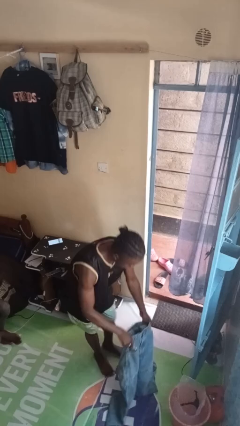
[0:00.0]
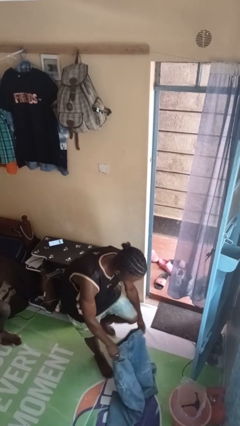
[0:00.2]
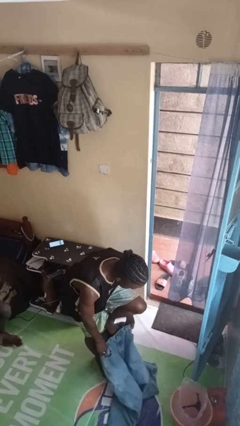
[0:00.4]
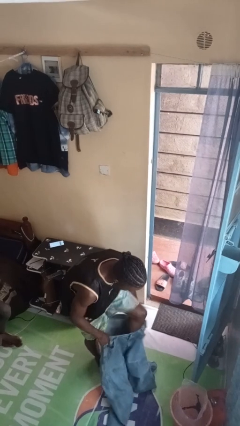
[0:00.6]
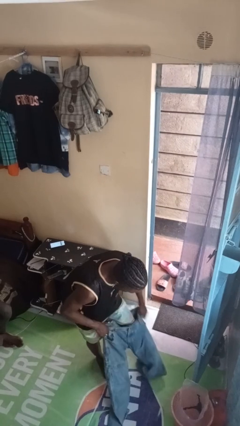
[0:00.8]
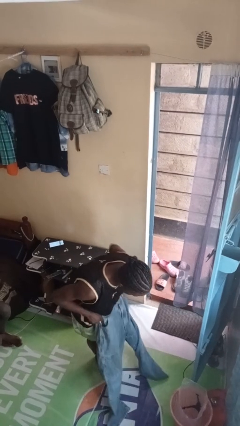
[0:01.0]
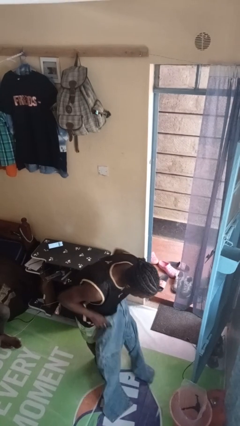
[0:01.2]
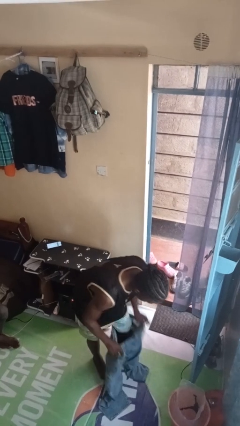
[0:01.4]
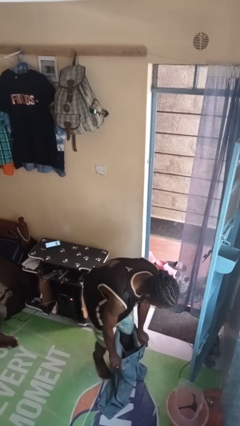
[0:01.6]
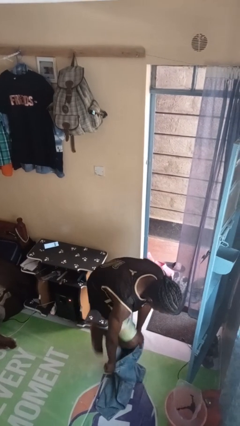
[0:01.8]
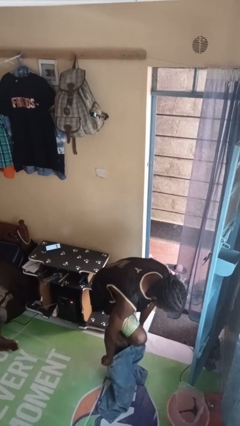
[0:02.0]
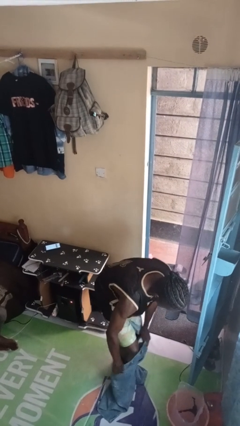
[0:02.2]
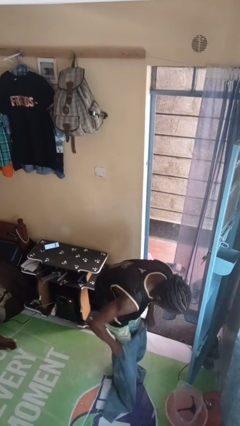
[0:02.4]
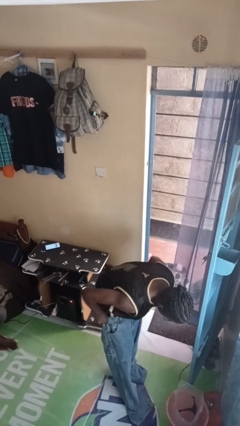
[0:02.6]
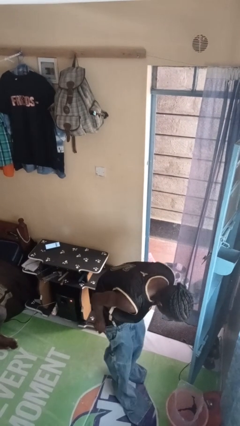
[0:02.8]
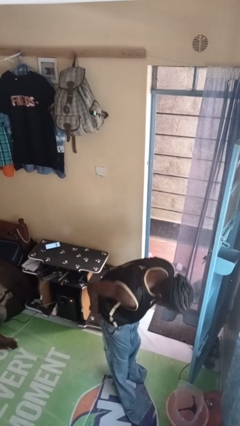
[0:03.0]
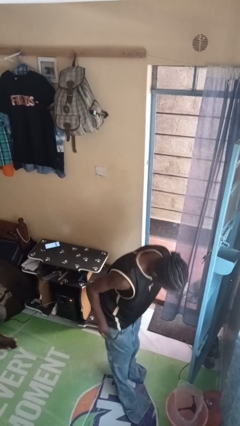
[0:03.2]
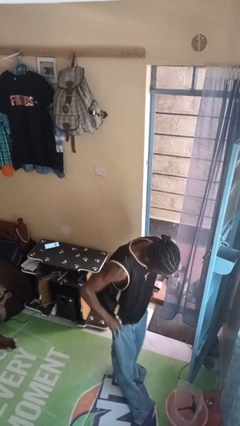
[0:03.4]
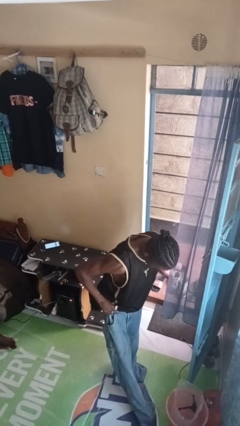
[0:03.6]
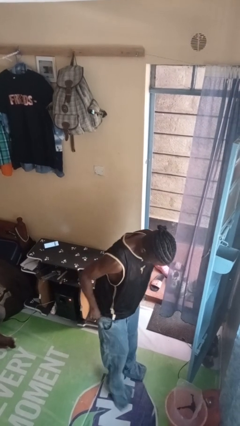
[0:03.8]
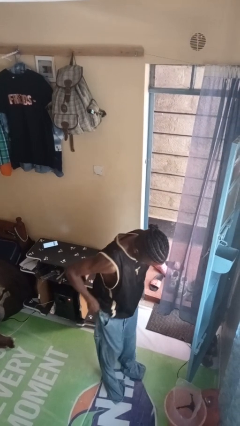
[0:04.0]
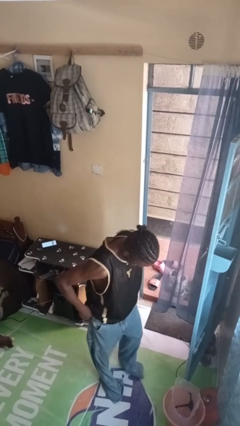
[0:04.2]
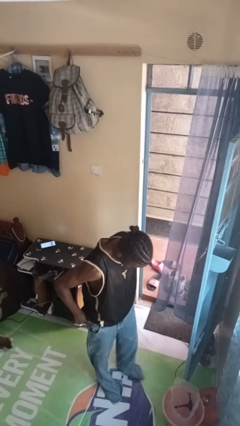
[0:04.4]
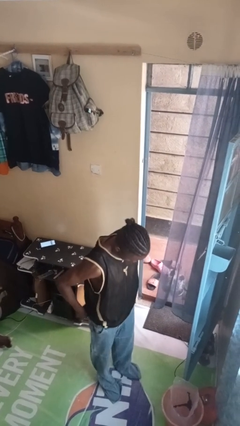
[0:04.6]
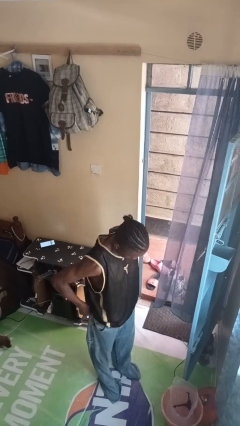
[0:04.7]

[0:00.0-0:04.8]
person puts on pants

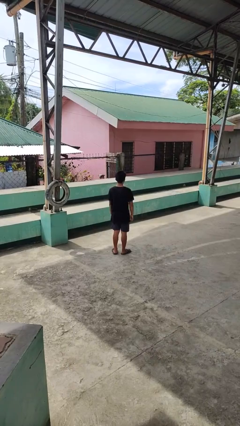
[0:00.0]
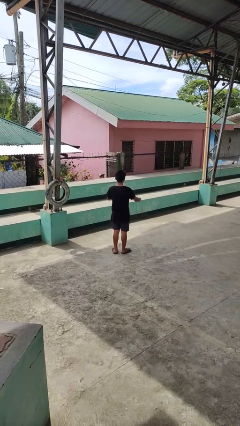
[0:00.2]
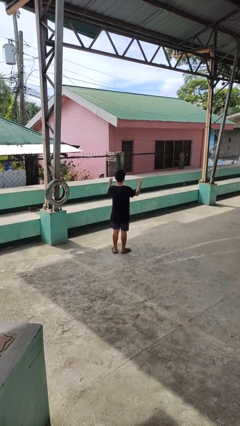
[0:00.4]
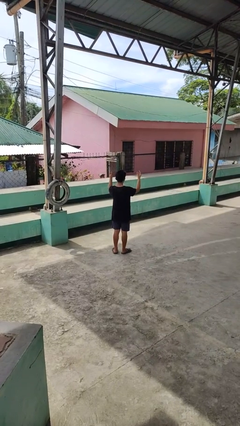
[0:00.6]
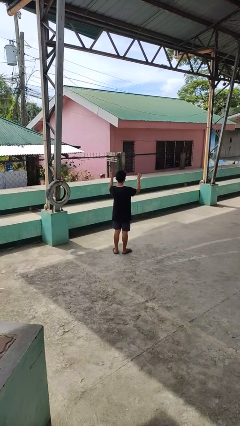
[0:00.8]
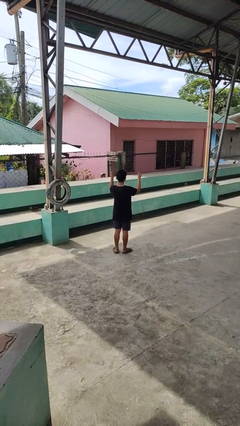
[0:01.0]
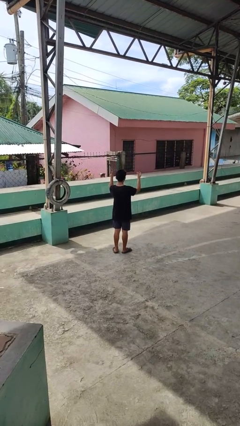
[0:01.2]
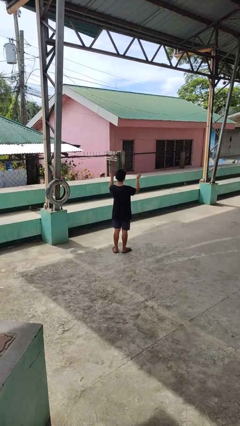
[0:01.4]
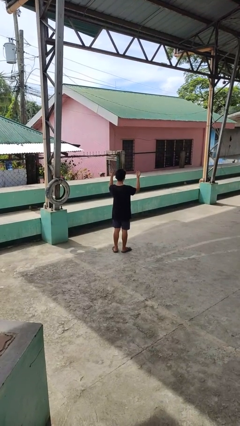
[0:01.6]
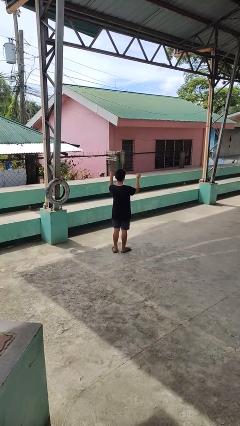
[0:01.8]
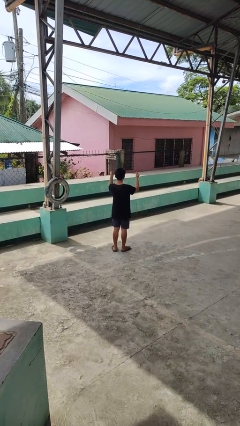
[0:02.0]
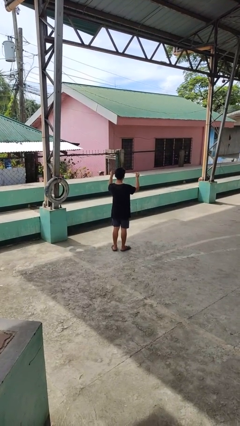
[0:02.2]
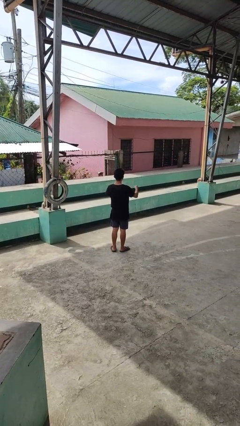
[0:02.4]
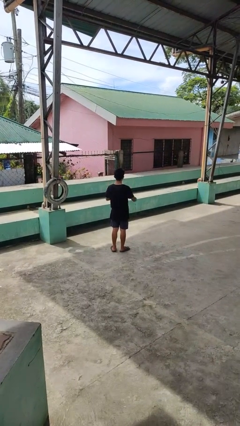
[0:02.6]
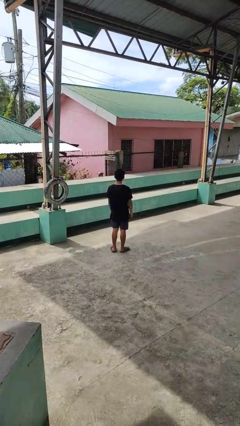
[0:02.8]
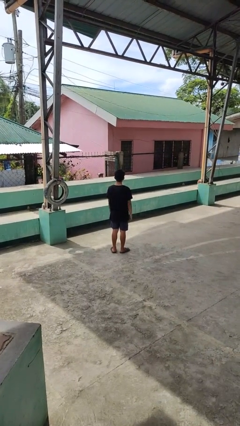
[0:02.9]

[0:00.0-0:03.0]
person snaps fingers

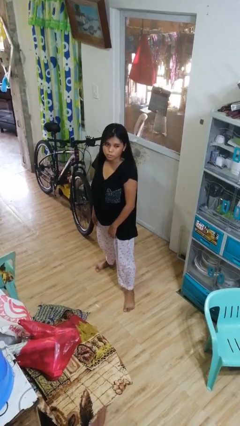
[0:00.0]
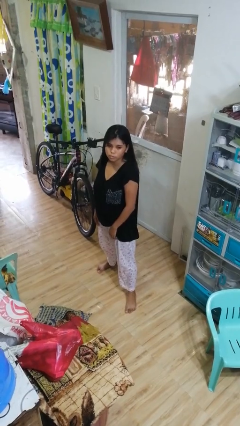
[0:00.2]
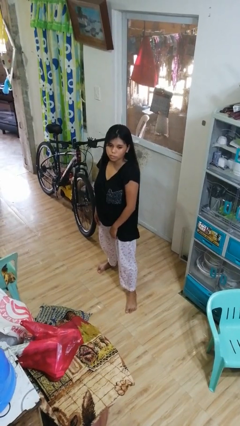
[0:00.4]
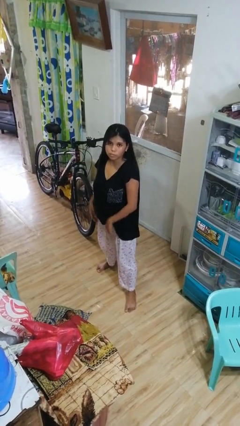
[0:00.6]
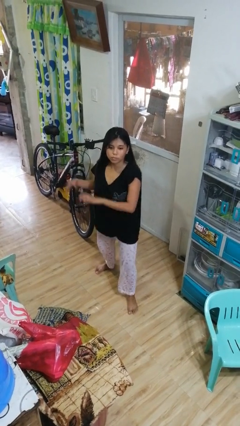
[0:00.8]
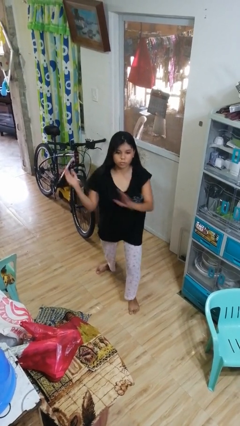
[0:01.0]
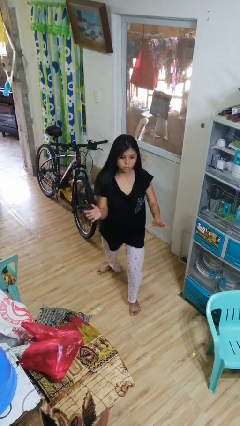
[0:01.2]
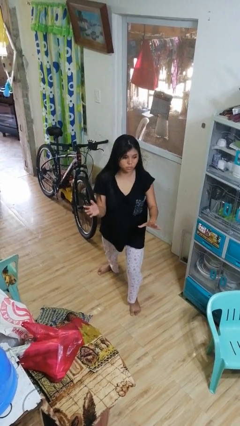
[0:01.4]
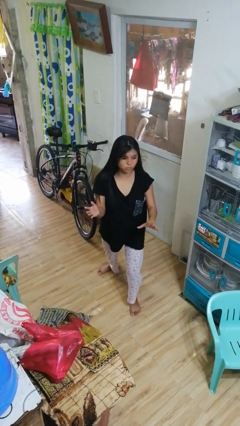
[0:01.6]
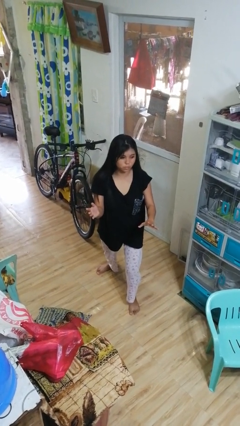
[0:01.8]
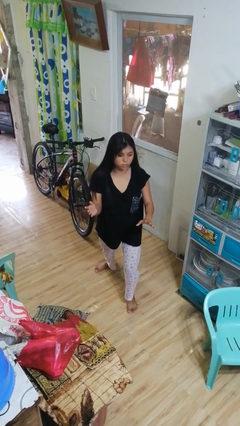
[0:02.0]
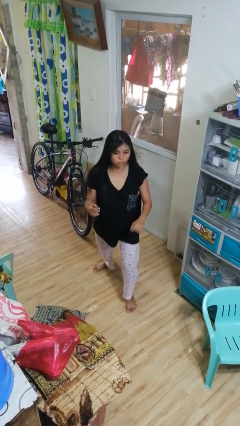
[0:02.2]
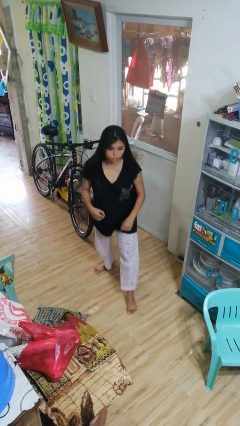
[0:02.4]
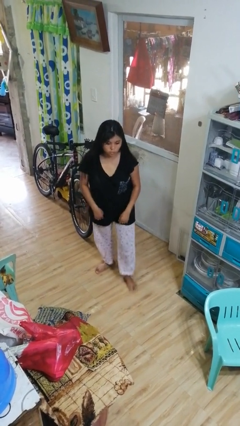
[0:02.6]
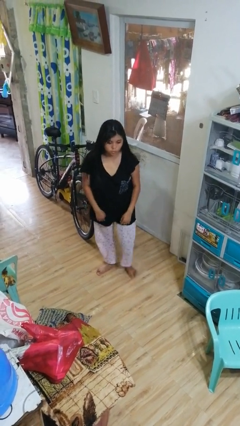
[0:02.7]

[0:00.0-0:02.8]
person karate chop

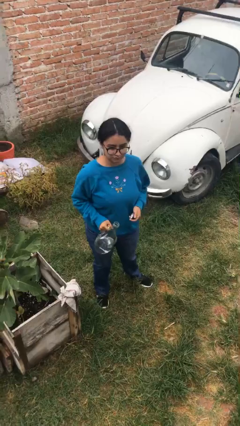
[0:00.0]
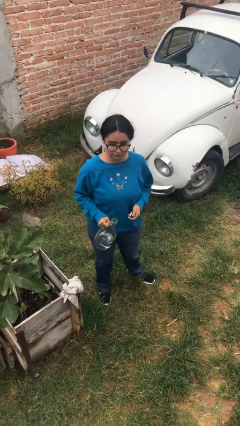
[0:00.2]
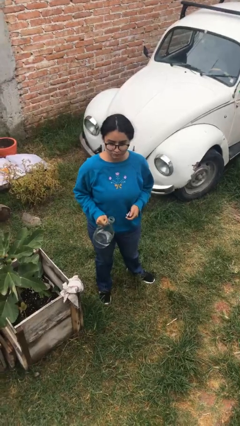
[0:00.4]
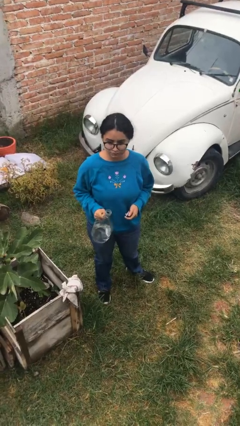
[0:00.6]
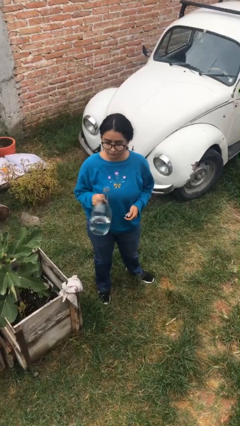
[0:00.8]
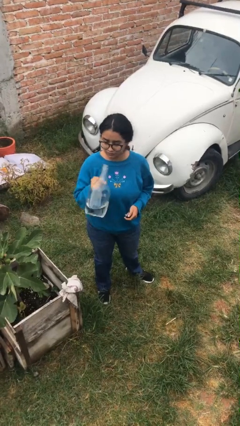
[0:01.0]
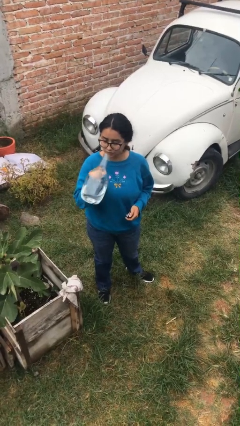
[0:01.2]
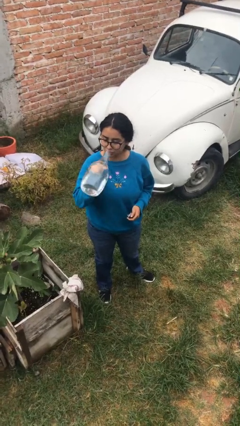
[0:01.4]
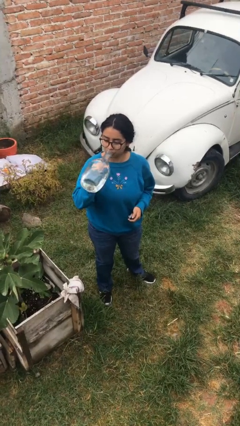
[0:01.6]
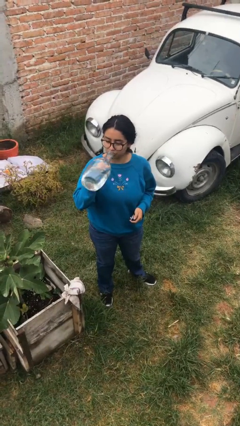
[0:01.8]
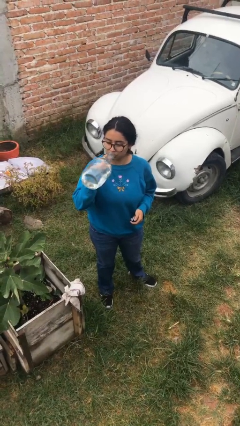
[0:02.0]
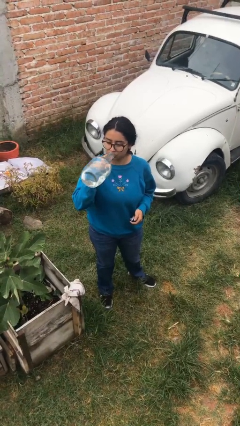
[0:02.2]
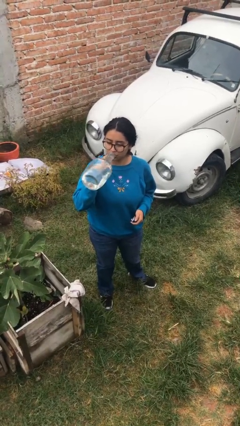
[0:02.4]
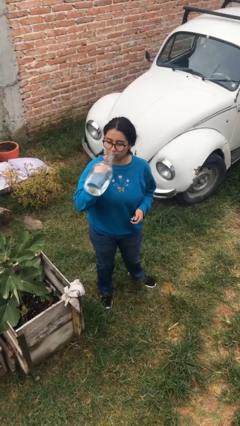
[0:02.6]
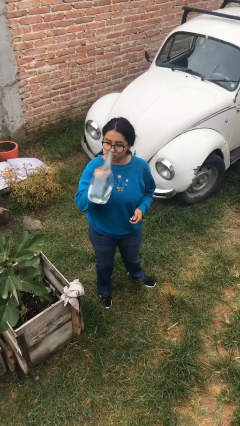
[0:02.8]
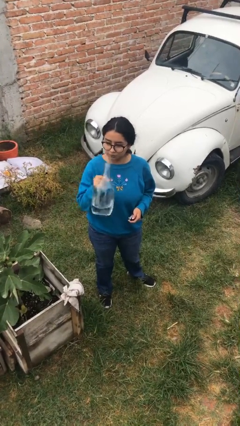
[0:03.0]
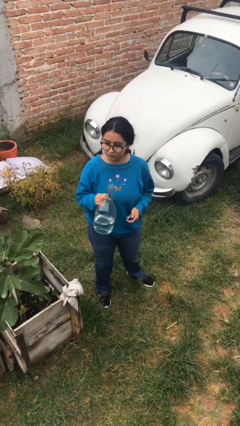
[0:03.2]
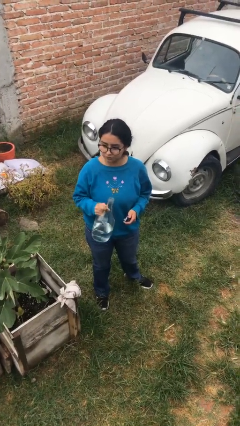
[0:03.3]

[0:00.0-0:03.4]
person drinks from bottle

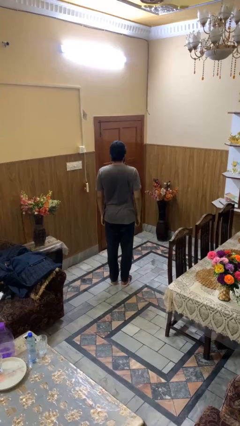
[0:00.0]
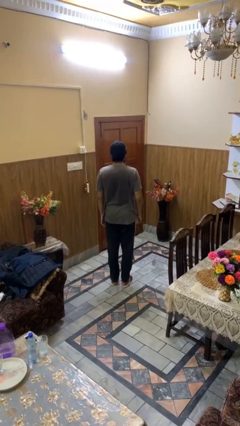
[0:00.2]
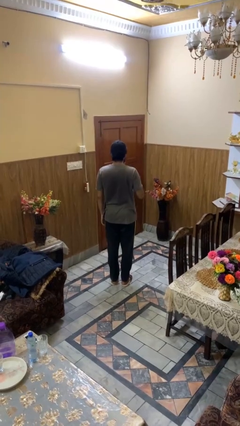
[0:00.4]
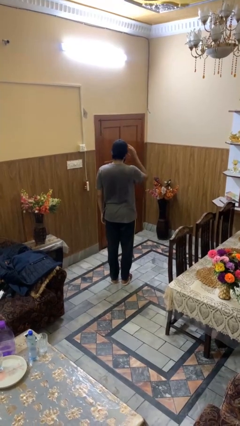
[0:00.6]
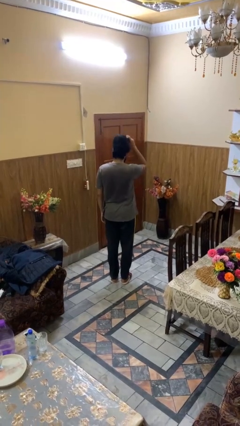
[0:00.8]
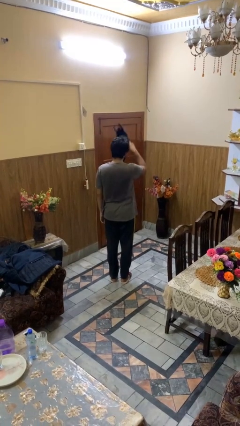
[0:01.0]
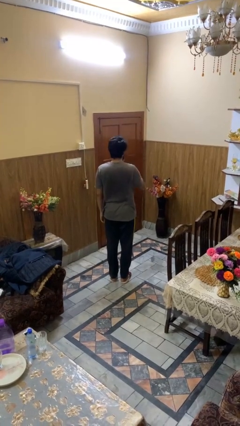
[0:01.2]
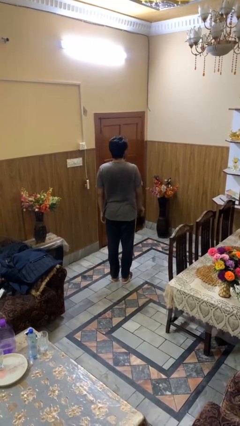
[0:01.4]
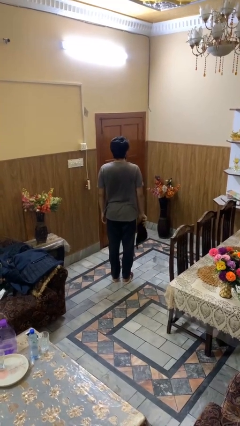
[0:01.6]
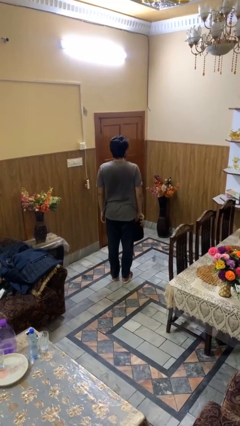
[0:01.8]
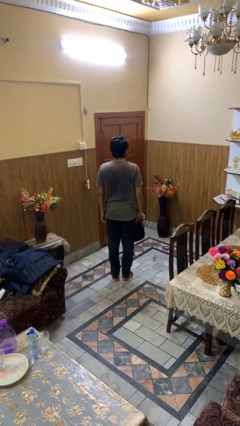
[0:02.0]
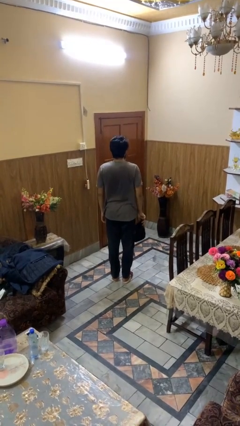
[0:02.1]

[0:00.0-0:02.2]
person takes off hat

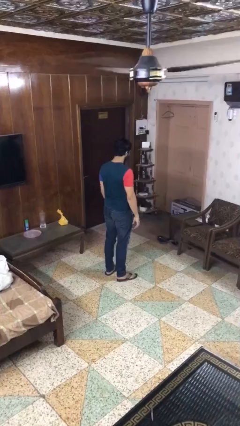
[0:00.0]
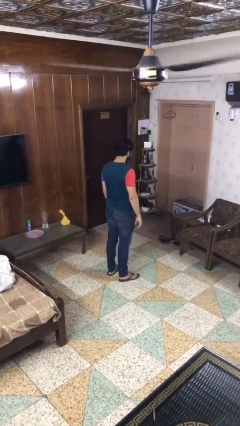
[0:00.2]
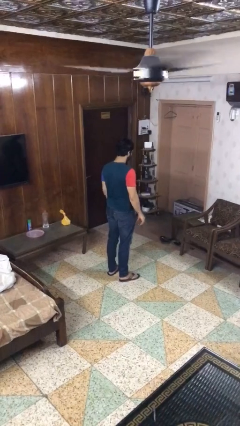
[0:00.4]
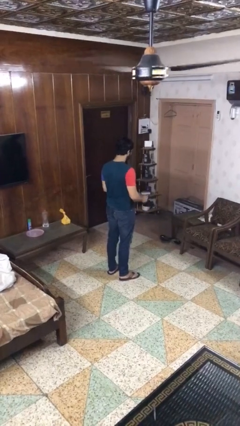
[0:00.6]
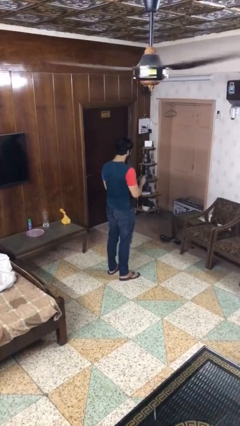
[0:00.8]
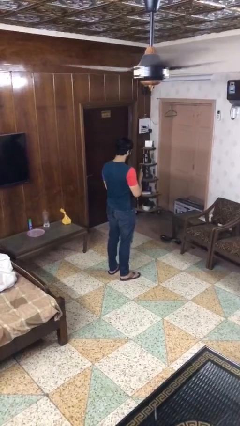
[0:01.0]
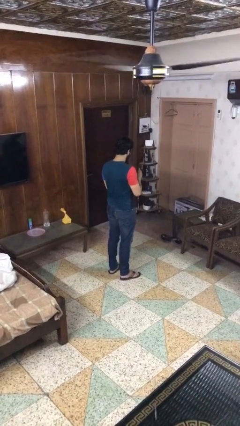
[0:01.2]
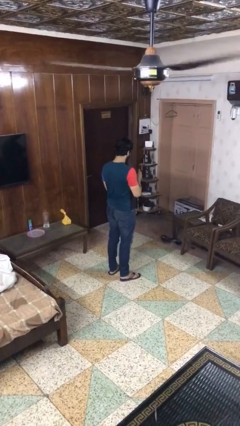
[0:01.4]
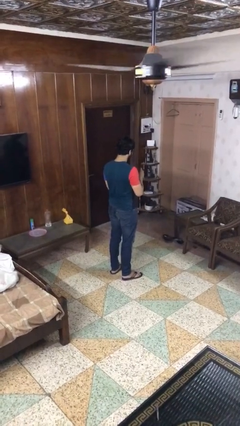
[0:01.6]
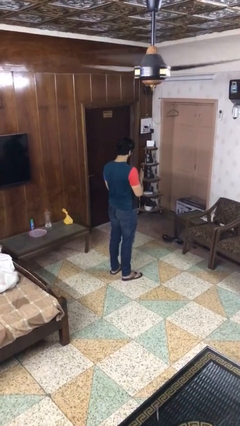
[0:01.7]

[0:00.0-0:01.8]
person clips fingernails
